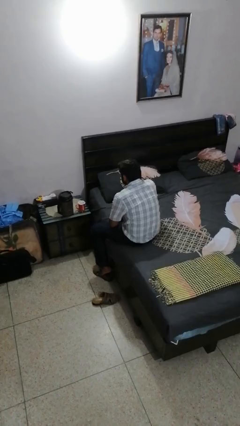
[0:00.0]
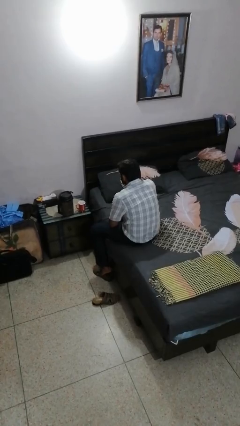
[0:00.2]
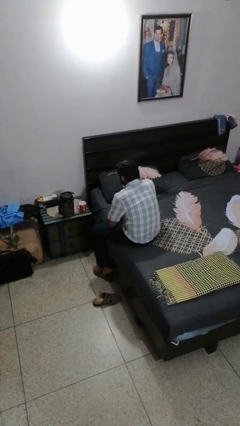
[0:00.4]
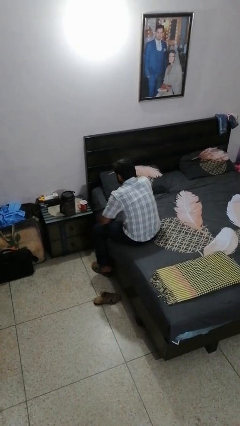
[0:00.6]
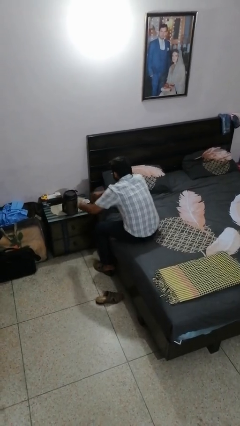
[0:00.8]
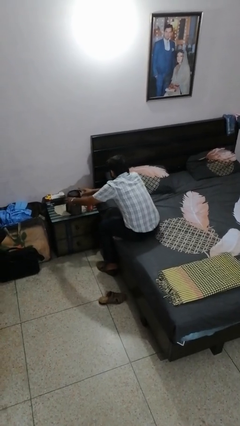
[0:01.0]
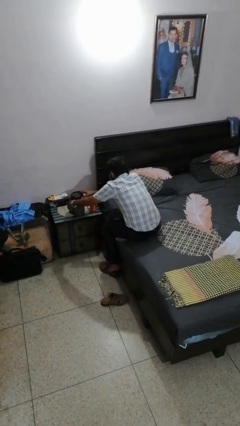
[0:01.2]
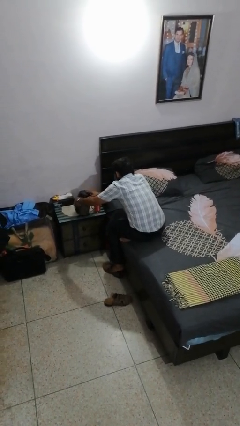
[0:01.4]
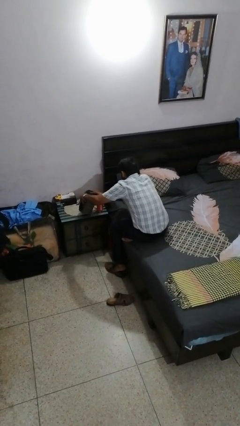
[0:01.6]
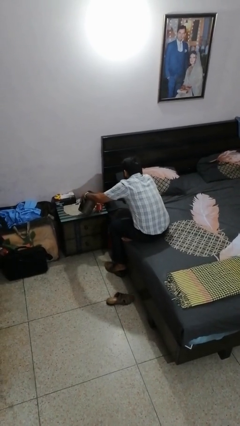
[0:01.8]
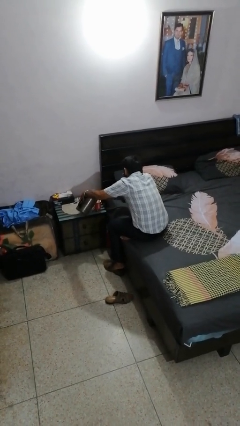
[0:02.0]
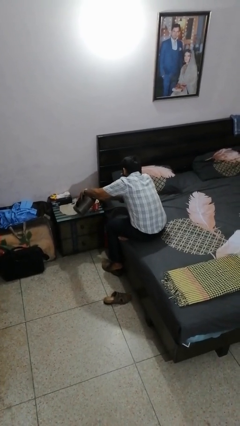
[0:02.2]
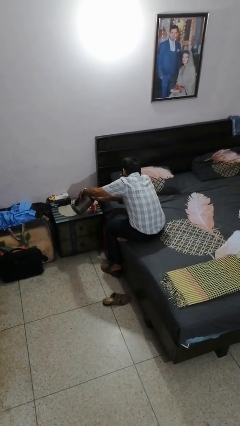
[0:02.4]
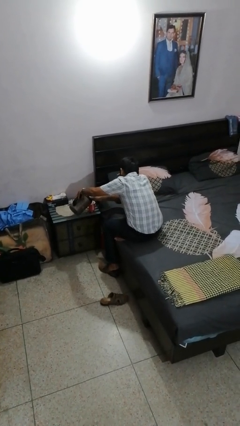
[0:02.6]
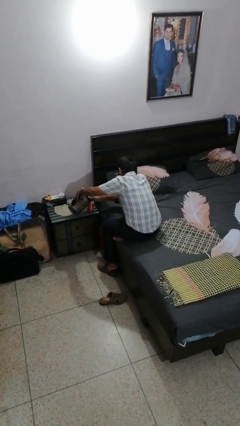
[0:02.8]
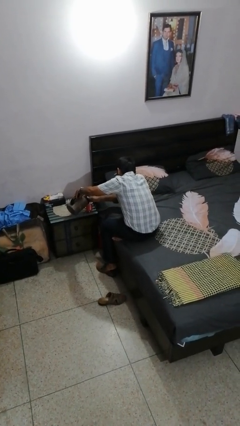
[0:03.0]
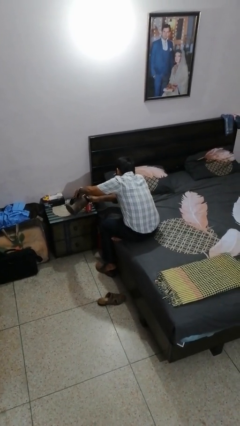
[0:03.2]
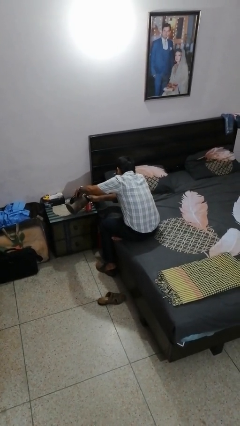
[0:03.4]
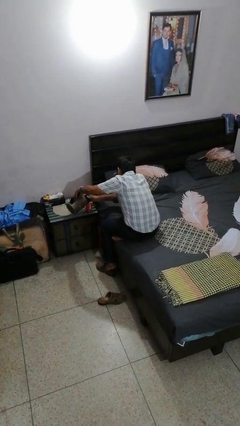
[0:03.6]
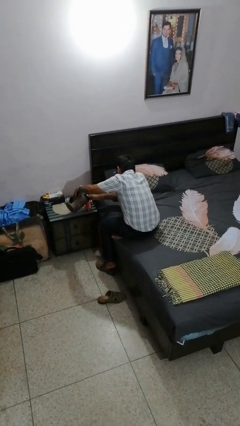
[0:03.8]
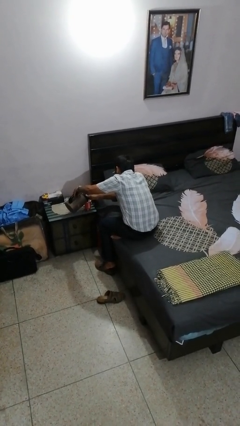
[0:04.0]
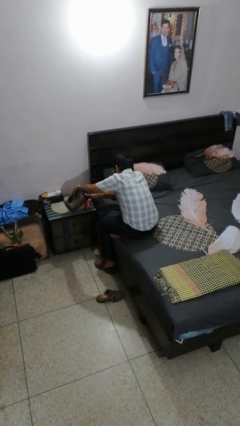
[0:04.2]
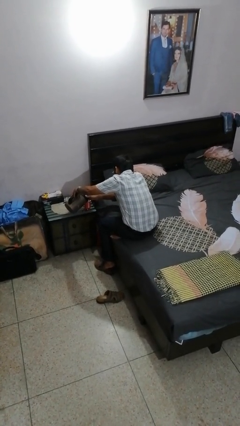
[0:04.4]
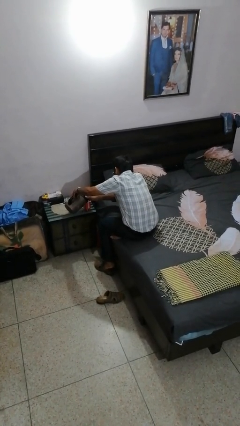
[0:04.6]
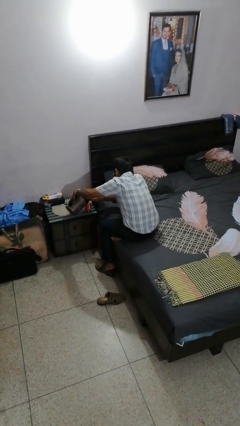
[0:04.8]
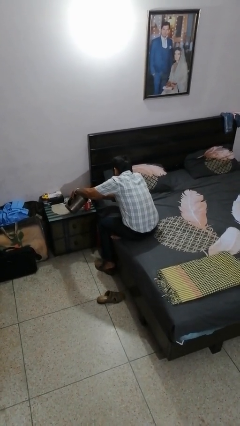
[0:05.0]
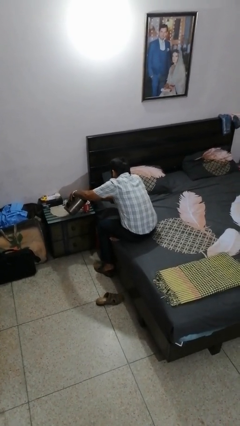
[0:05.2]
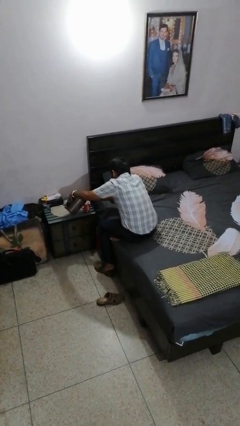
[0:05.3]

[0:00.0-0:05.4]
person pours coffee into mug

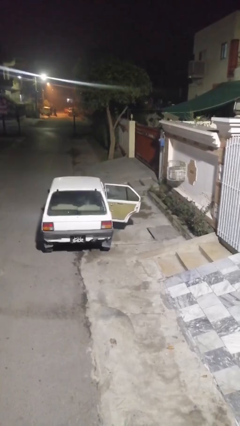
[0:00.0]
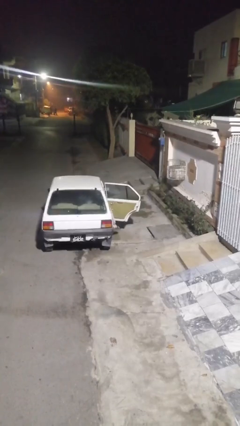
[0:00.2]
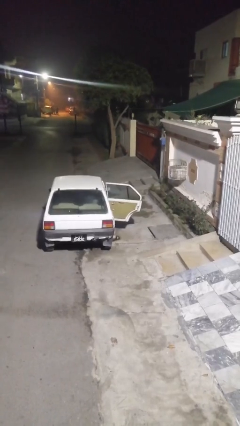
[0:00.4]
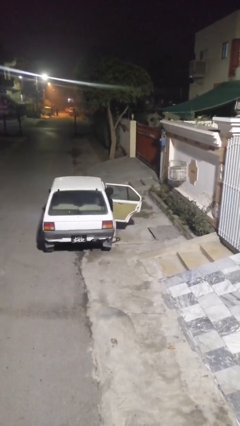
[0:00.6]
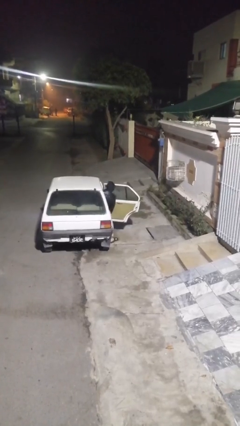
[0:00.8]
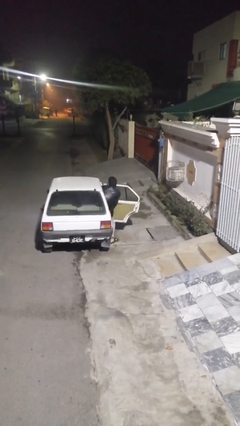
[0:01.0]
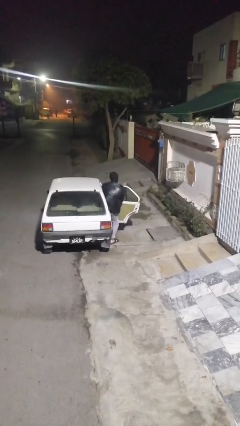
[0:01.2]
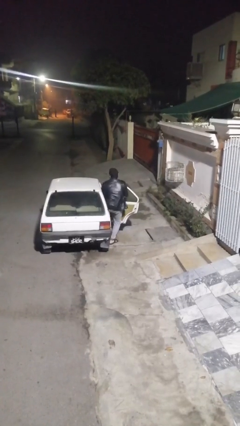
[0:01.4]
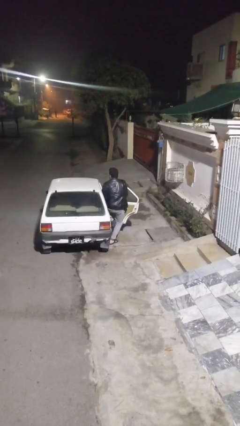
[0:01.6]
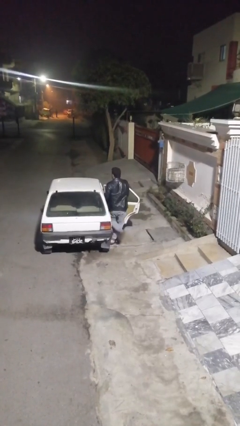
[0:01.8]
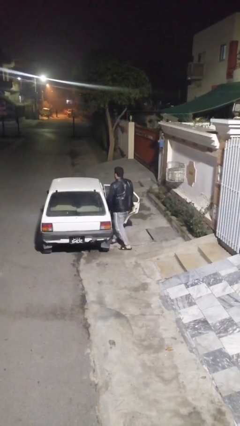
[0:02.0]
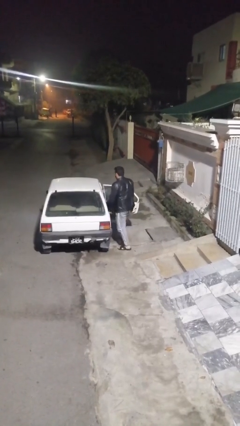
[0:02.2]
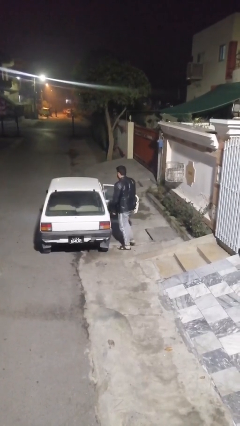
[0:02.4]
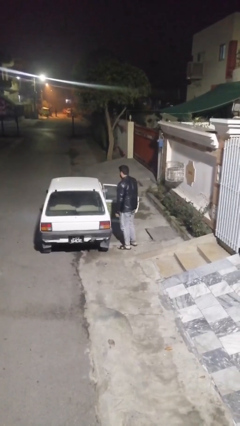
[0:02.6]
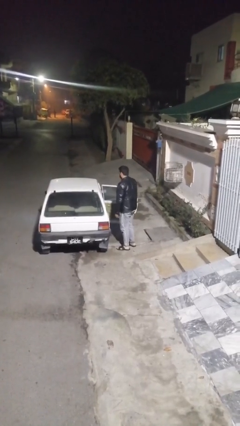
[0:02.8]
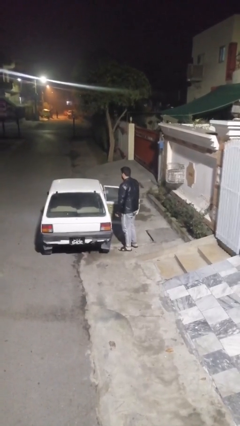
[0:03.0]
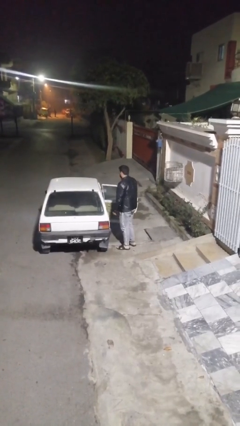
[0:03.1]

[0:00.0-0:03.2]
person exits car

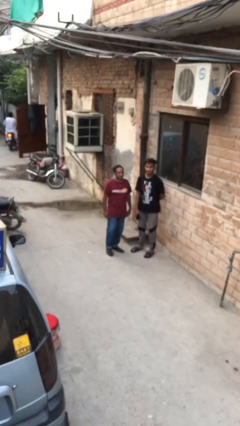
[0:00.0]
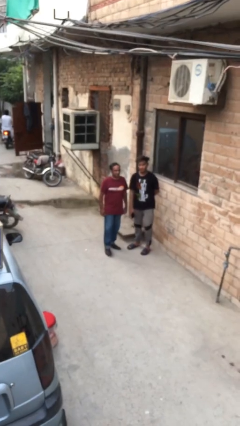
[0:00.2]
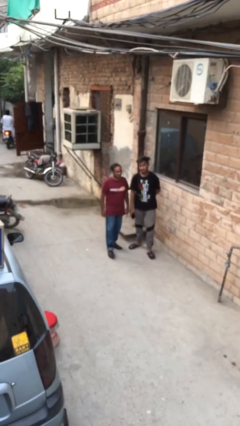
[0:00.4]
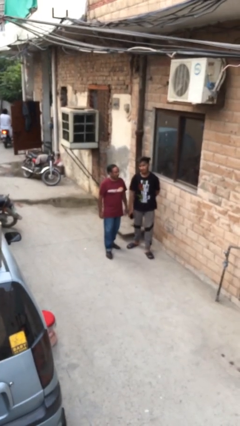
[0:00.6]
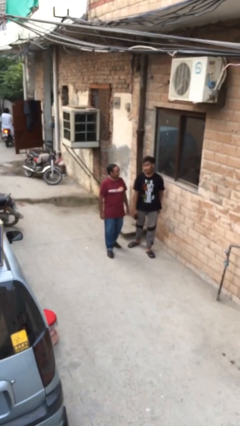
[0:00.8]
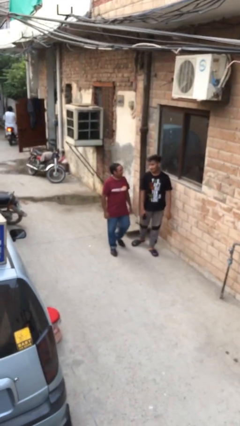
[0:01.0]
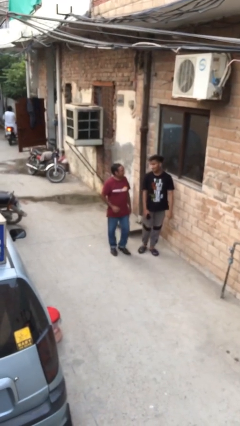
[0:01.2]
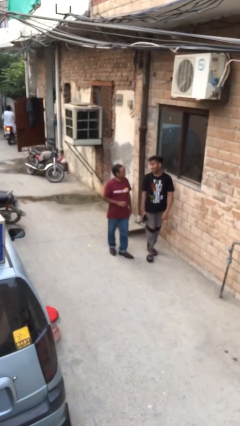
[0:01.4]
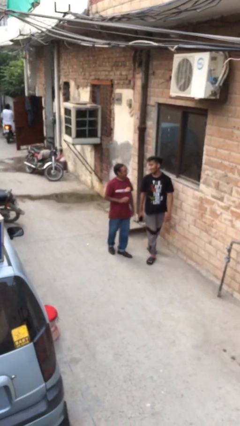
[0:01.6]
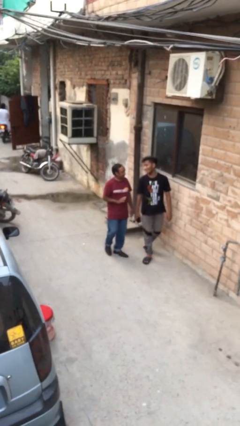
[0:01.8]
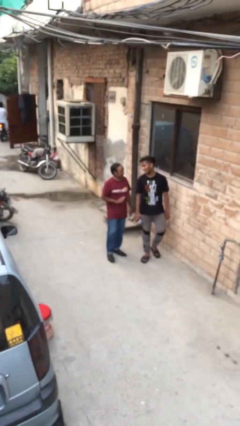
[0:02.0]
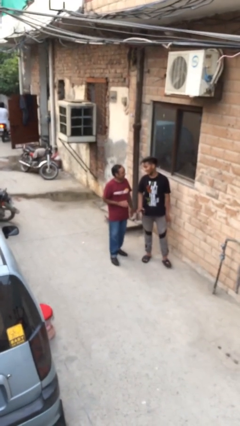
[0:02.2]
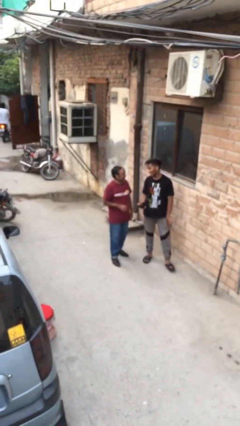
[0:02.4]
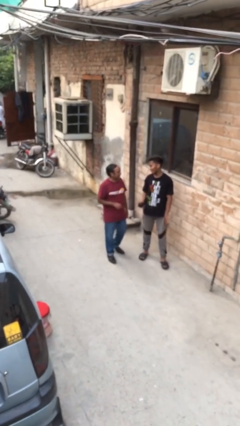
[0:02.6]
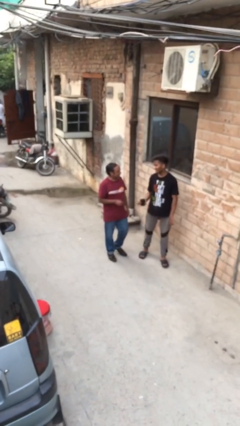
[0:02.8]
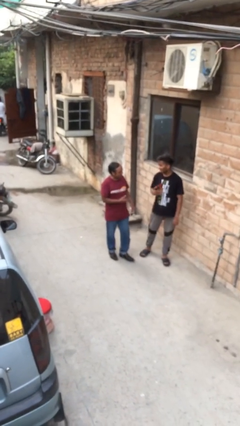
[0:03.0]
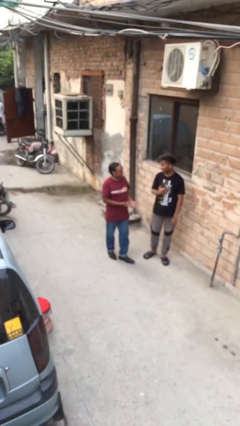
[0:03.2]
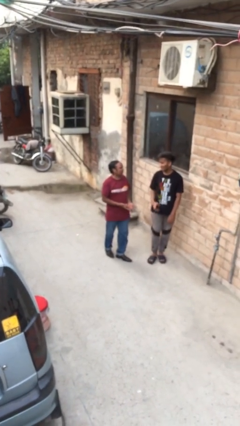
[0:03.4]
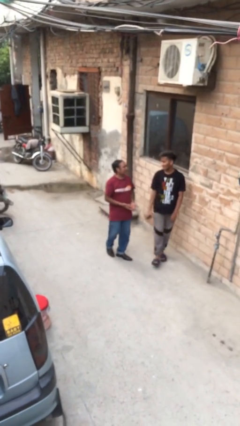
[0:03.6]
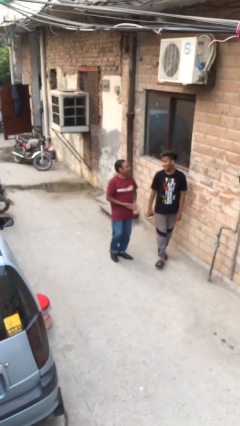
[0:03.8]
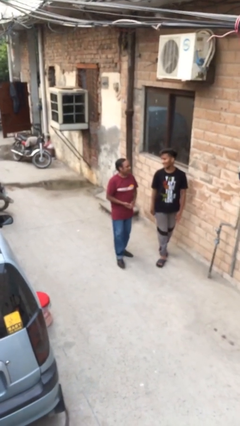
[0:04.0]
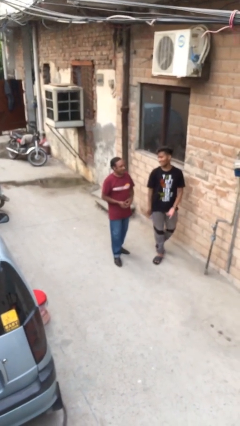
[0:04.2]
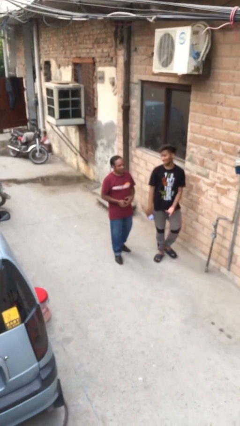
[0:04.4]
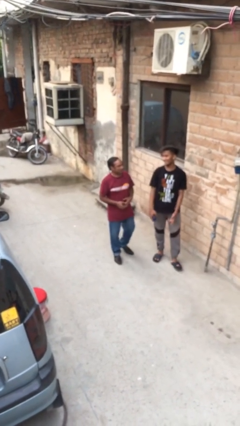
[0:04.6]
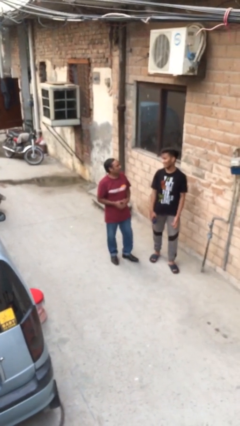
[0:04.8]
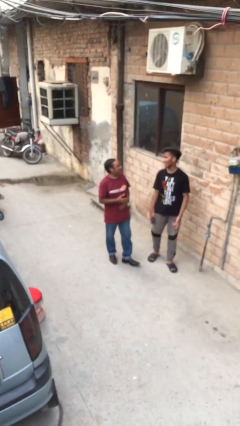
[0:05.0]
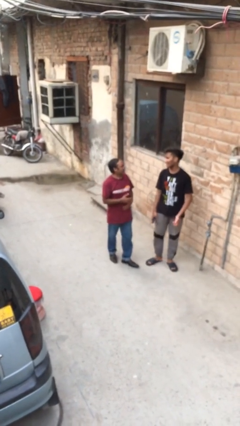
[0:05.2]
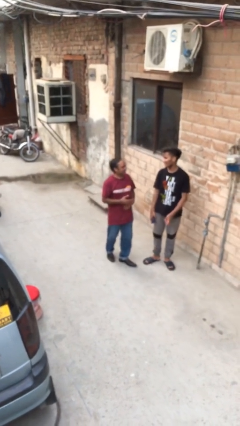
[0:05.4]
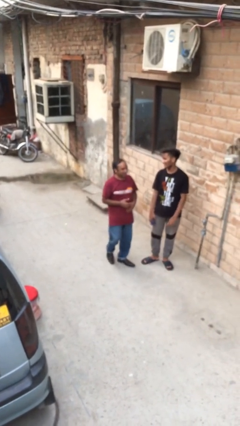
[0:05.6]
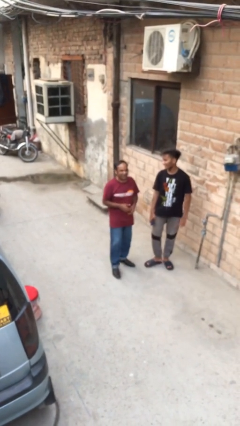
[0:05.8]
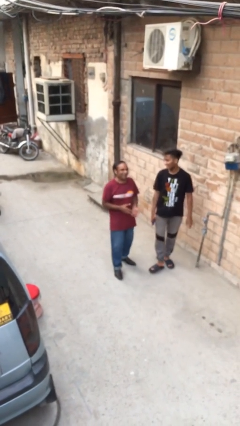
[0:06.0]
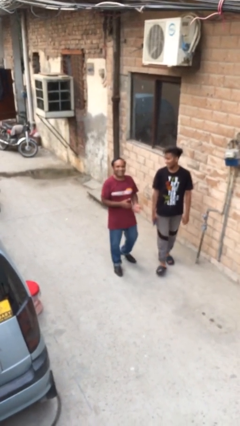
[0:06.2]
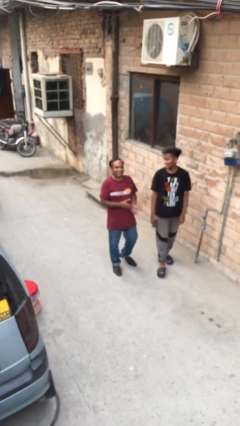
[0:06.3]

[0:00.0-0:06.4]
person talks to person

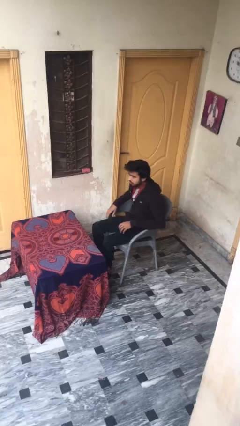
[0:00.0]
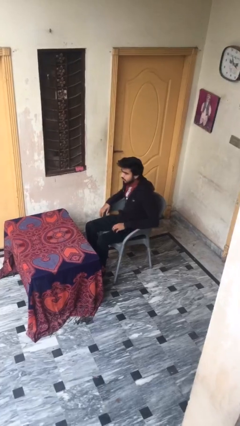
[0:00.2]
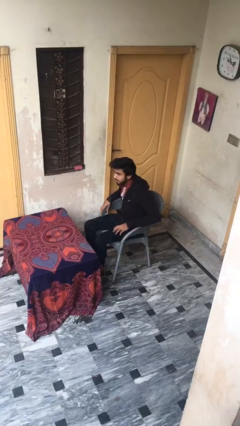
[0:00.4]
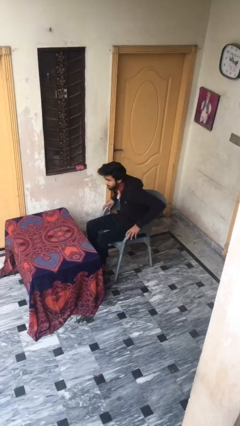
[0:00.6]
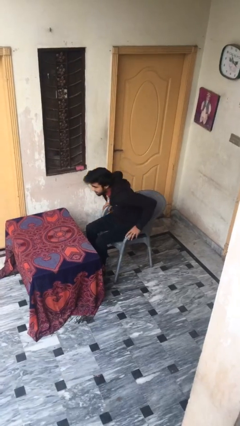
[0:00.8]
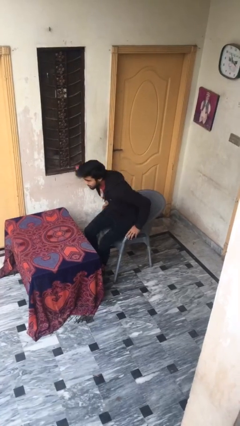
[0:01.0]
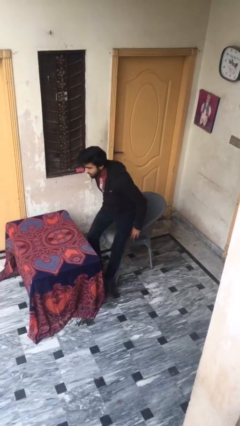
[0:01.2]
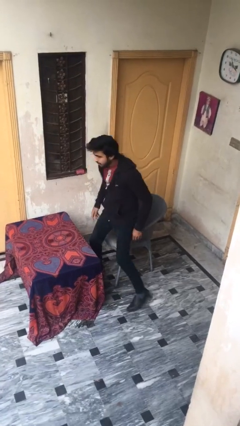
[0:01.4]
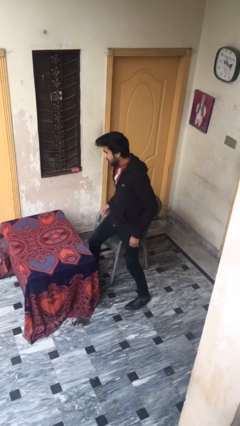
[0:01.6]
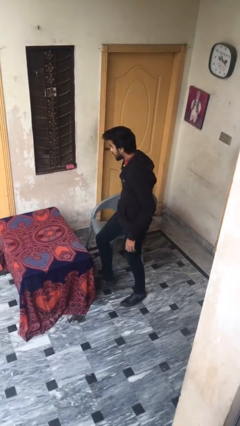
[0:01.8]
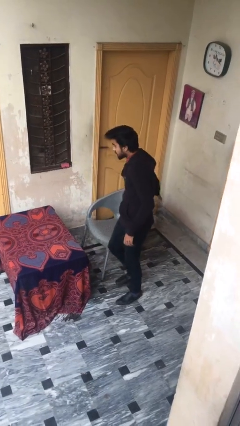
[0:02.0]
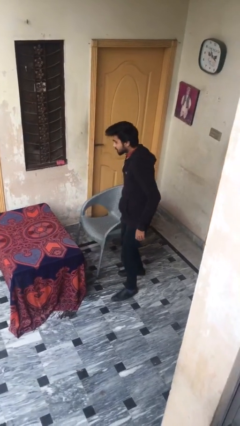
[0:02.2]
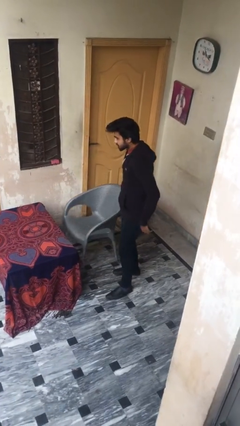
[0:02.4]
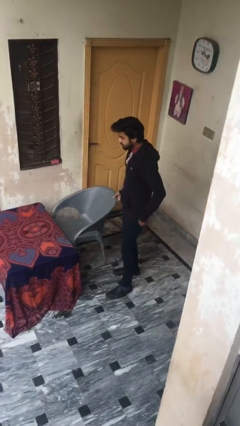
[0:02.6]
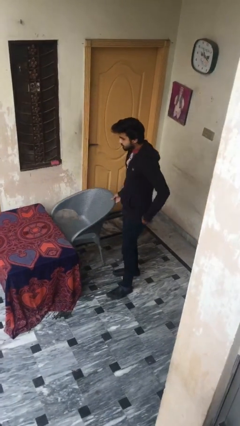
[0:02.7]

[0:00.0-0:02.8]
person stands up

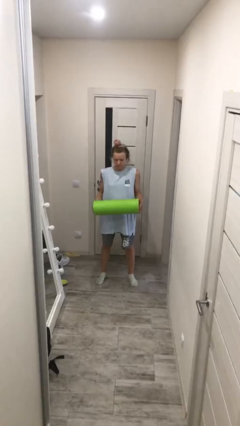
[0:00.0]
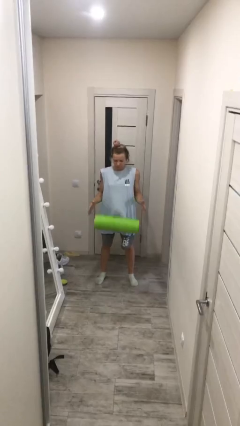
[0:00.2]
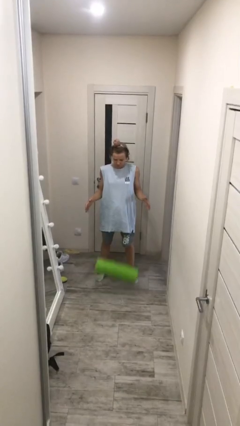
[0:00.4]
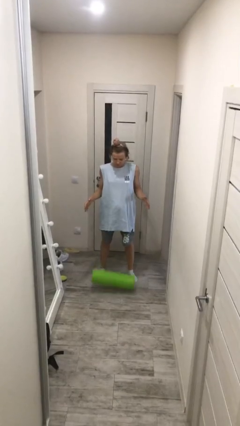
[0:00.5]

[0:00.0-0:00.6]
person drops object
